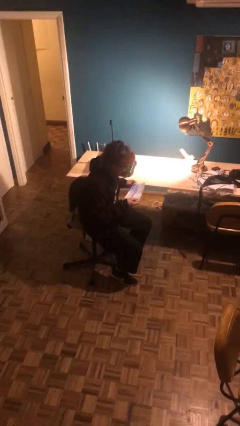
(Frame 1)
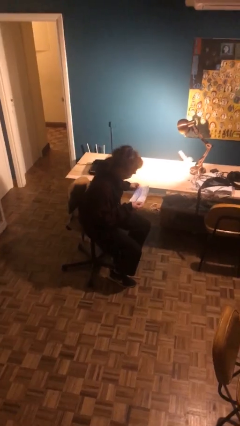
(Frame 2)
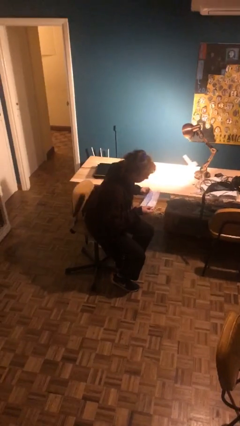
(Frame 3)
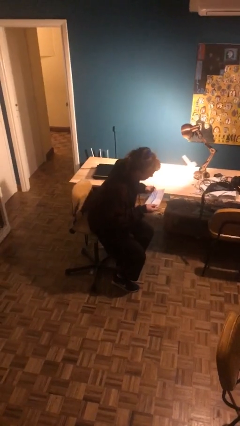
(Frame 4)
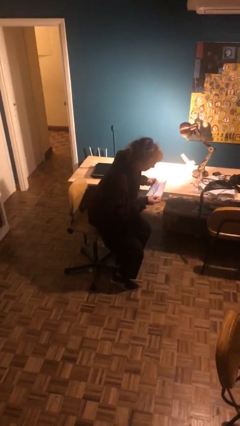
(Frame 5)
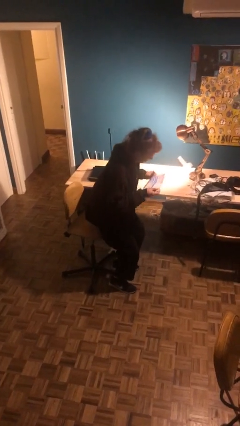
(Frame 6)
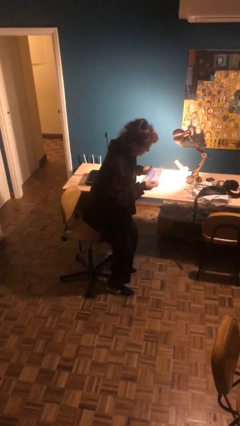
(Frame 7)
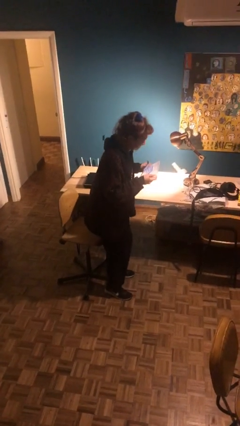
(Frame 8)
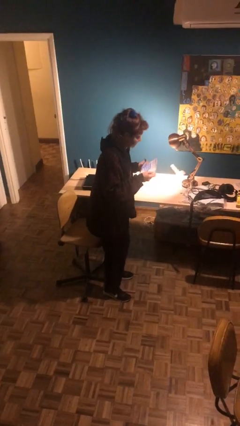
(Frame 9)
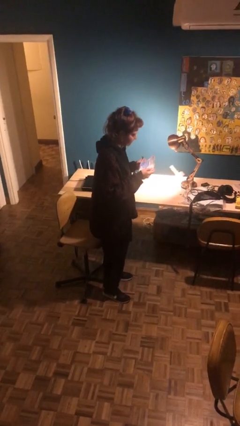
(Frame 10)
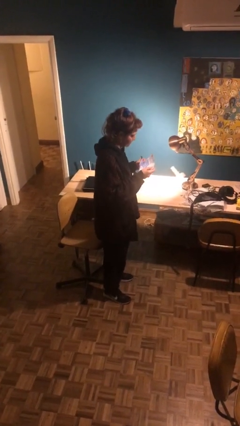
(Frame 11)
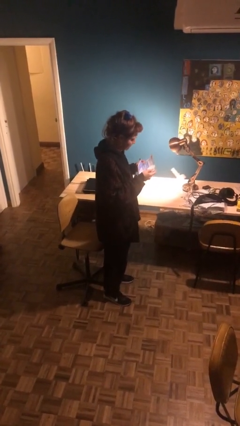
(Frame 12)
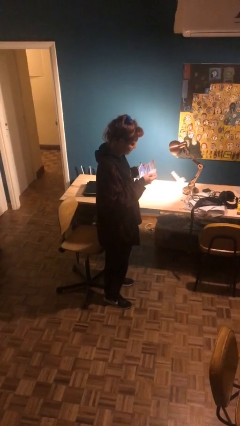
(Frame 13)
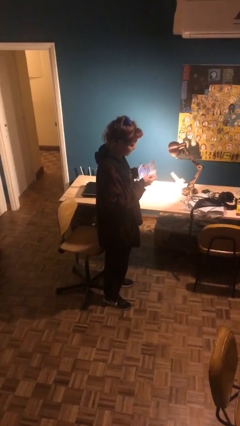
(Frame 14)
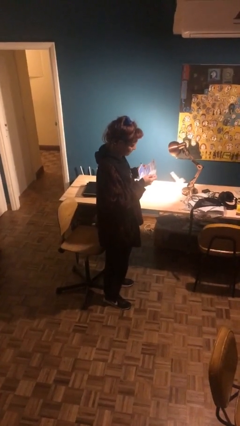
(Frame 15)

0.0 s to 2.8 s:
person stands up

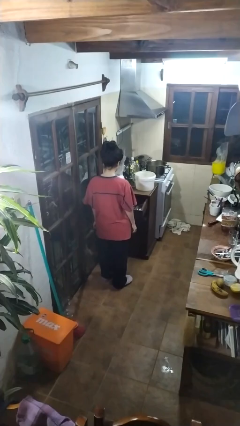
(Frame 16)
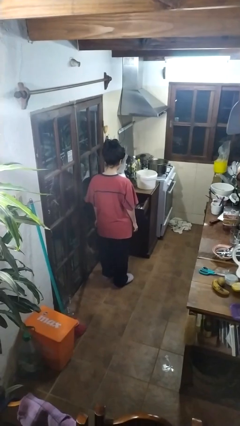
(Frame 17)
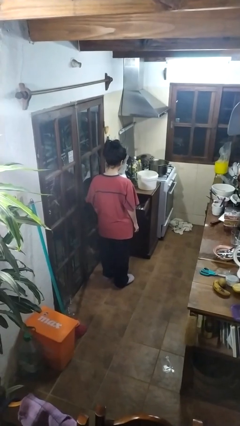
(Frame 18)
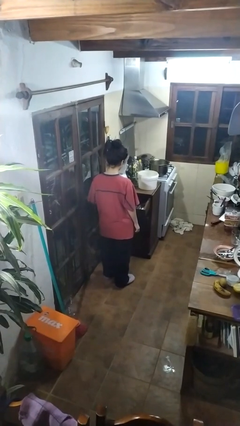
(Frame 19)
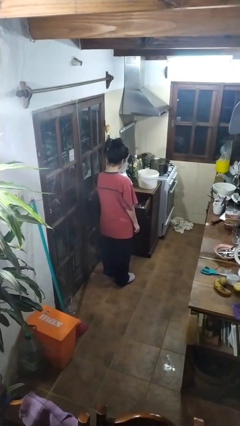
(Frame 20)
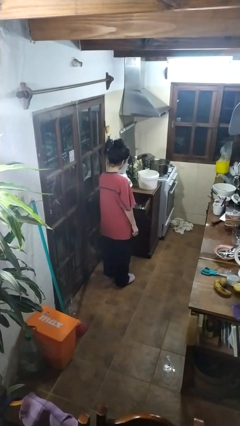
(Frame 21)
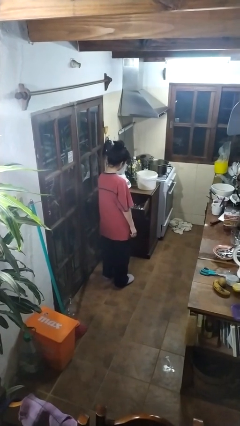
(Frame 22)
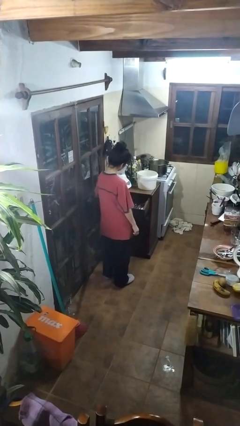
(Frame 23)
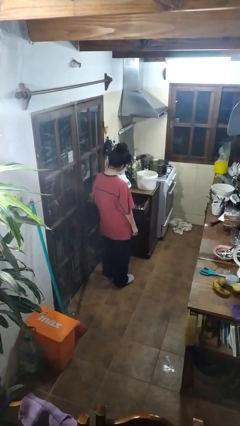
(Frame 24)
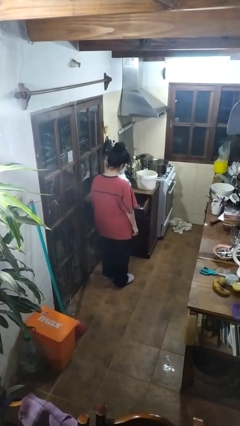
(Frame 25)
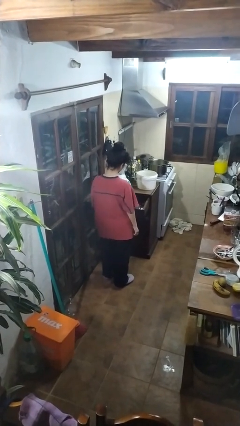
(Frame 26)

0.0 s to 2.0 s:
person takes object from kitchen drawer

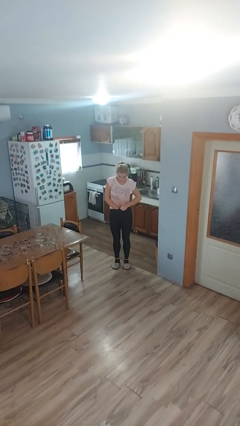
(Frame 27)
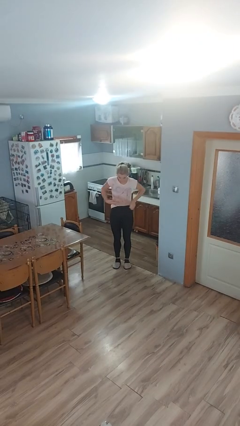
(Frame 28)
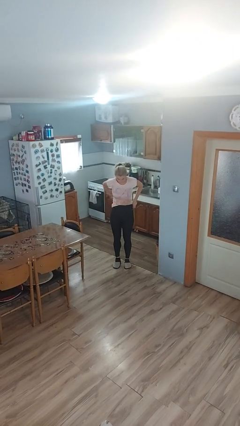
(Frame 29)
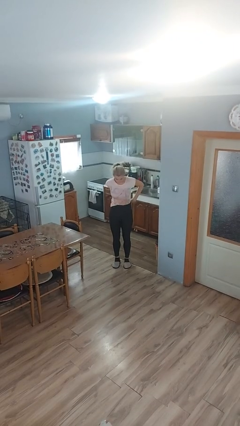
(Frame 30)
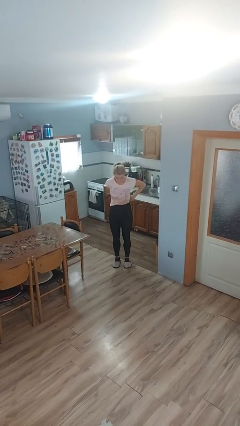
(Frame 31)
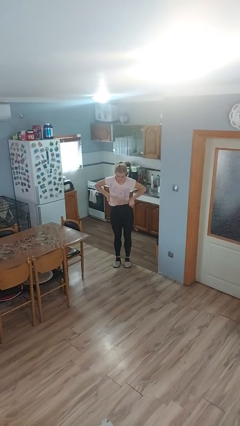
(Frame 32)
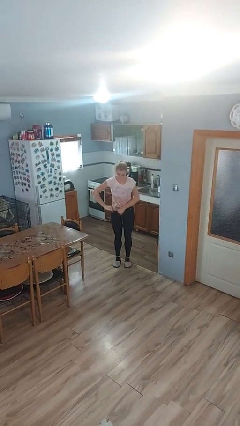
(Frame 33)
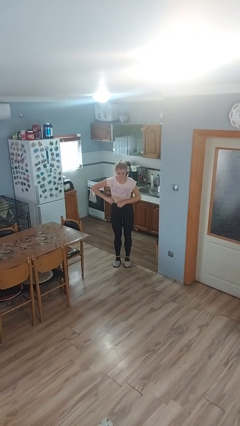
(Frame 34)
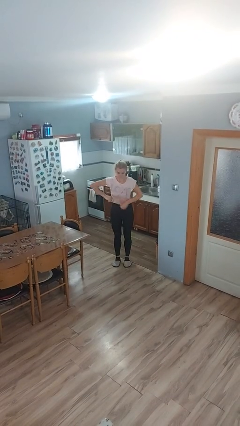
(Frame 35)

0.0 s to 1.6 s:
person tucks in shirt

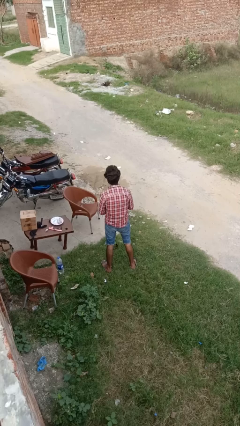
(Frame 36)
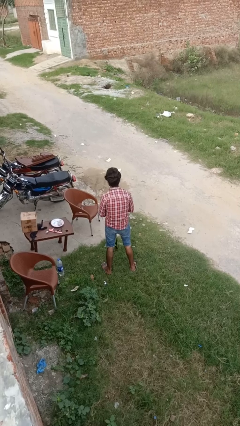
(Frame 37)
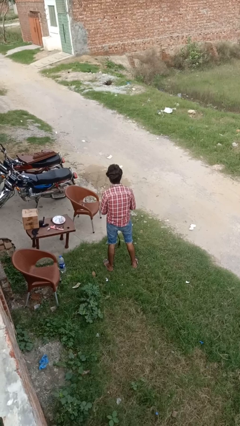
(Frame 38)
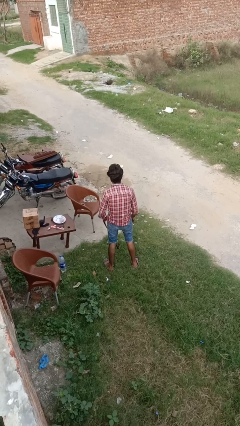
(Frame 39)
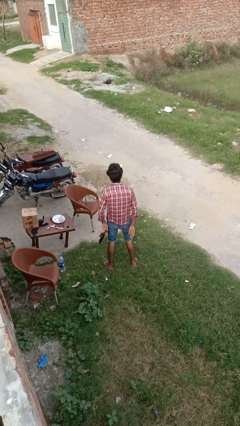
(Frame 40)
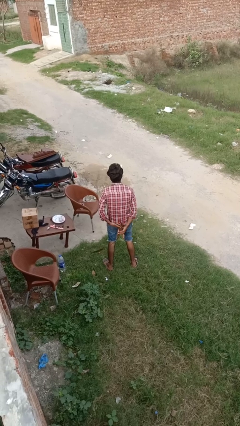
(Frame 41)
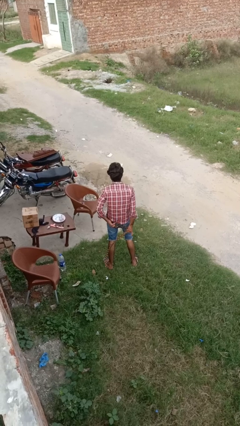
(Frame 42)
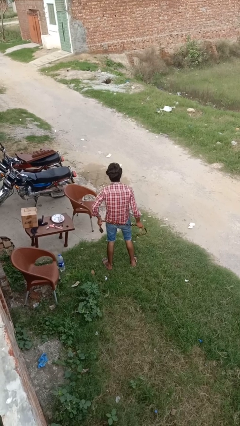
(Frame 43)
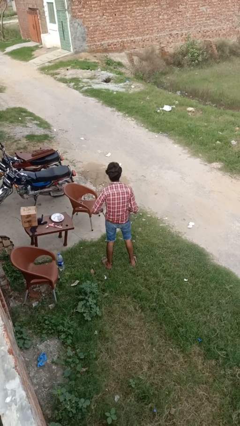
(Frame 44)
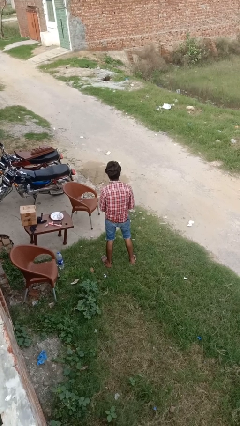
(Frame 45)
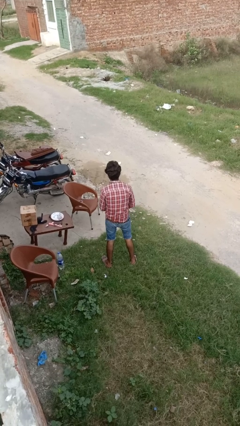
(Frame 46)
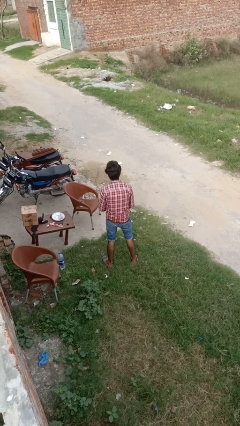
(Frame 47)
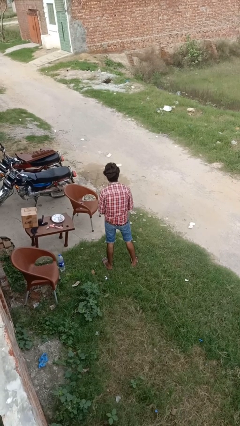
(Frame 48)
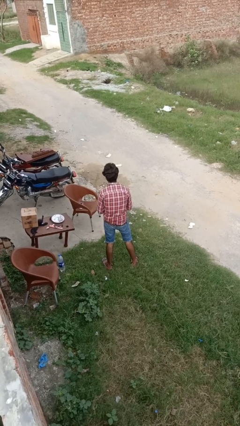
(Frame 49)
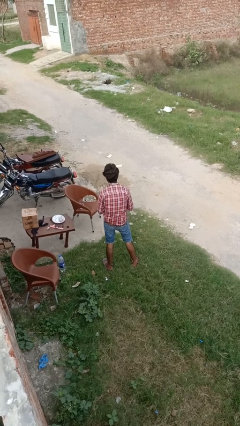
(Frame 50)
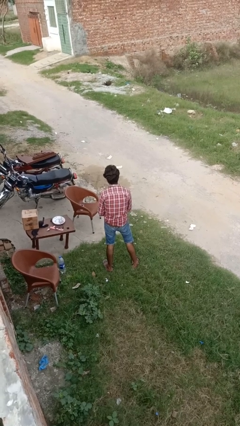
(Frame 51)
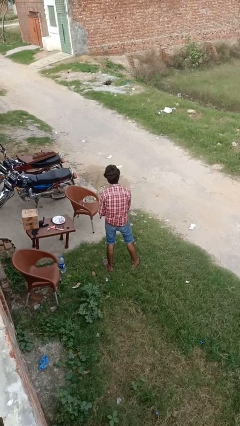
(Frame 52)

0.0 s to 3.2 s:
person puts on belt

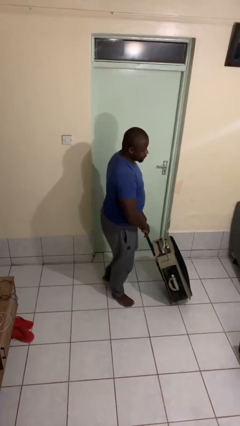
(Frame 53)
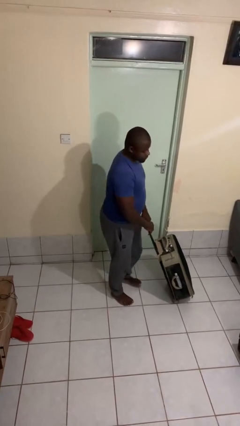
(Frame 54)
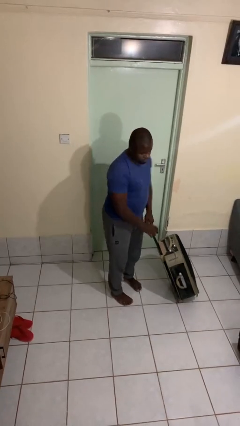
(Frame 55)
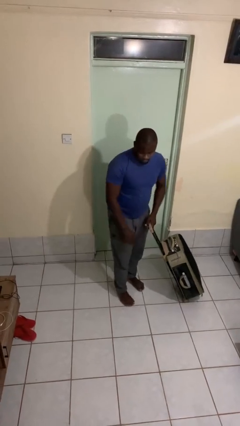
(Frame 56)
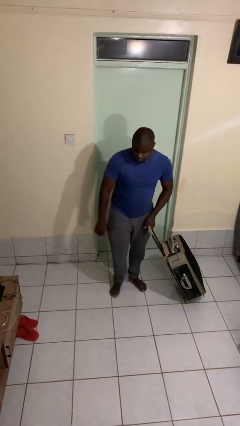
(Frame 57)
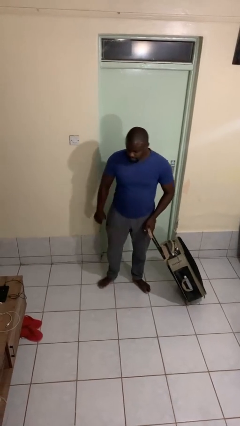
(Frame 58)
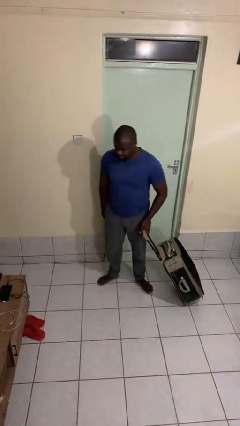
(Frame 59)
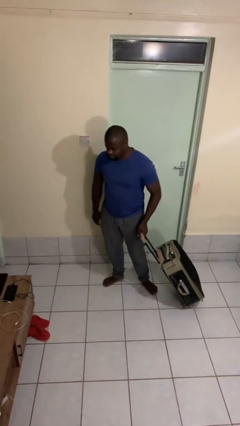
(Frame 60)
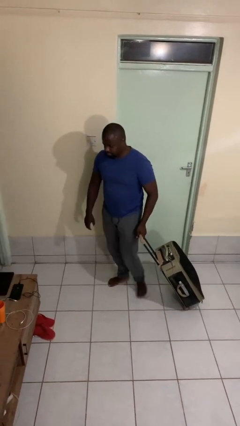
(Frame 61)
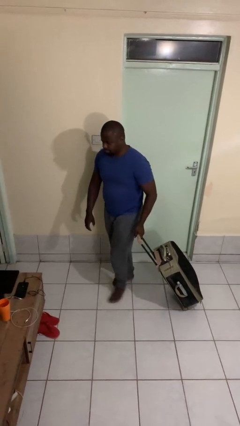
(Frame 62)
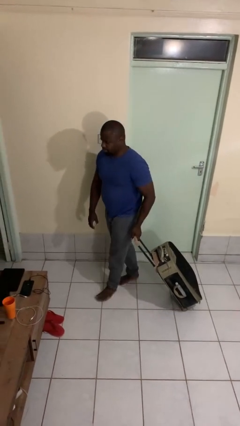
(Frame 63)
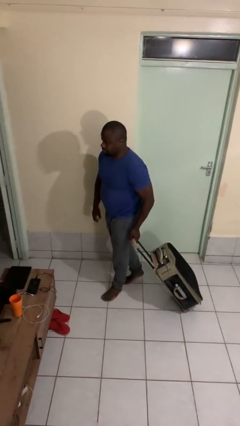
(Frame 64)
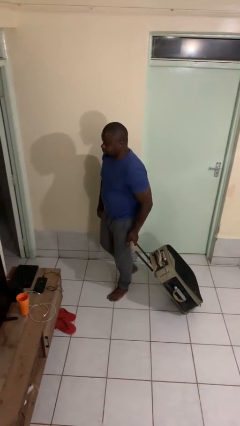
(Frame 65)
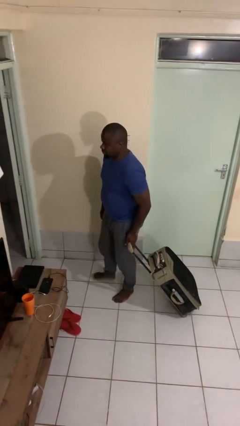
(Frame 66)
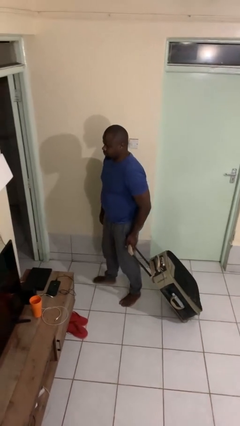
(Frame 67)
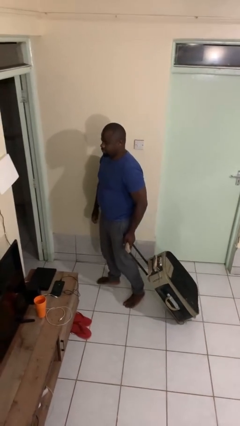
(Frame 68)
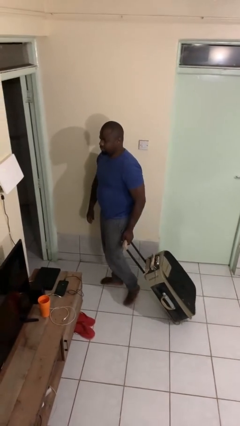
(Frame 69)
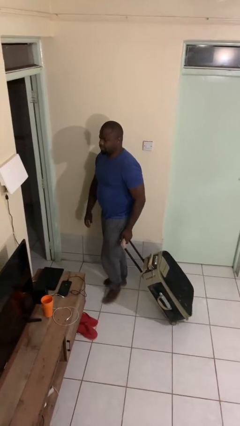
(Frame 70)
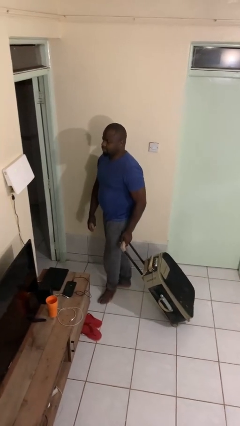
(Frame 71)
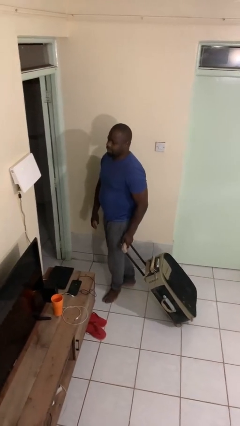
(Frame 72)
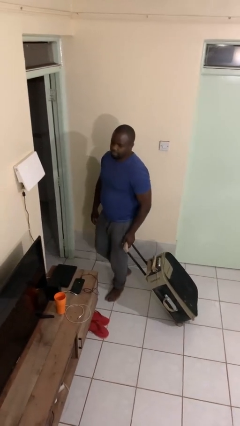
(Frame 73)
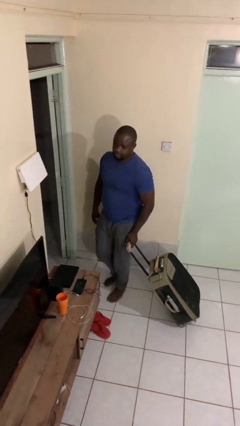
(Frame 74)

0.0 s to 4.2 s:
person pulls wheeled cart

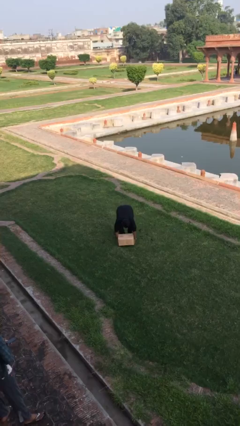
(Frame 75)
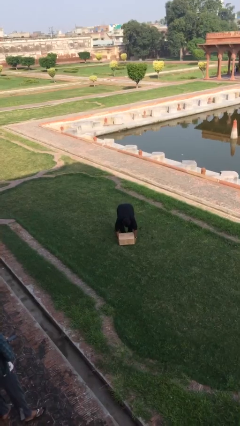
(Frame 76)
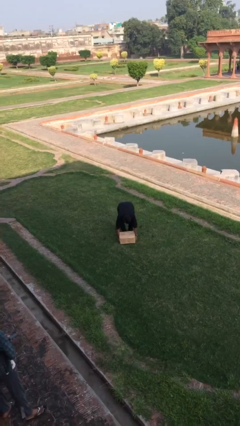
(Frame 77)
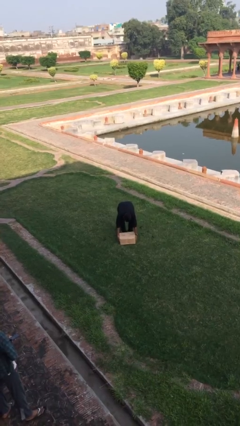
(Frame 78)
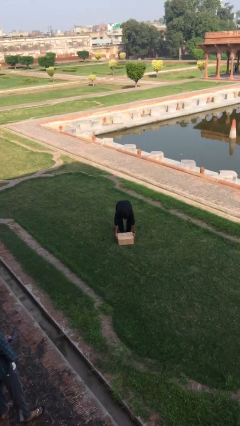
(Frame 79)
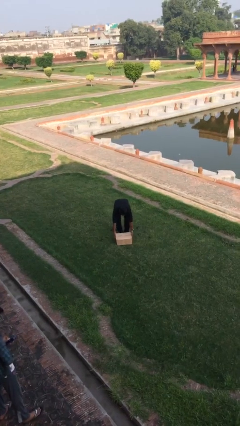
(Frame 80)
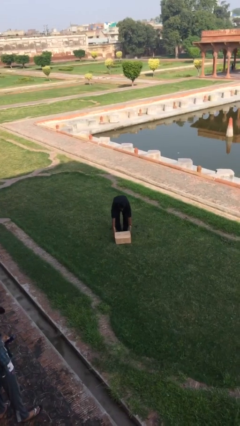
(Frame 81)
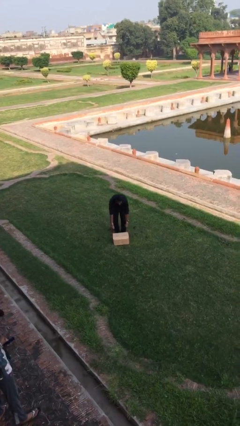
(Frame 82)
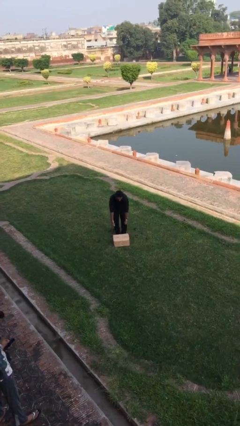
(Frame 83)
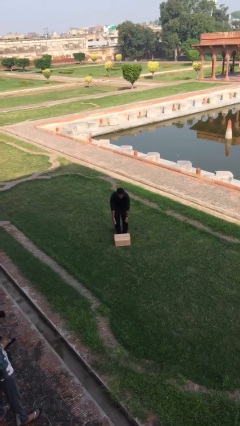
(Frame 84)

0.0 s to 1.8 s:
person puts down object on floor

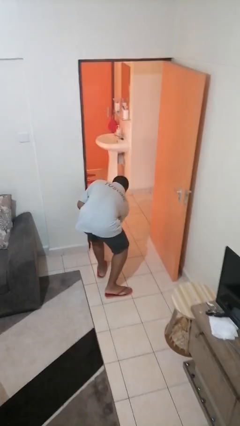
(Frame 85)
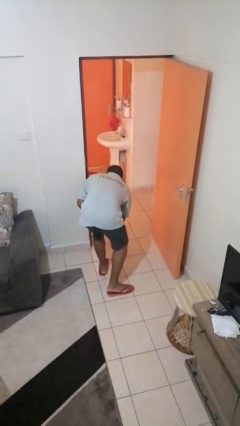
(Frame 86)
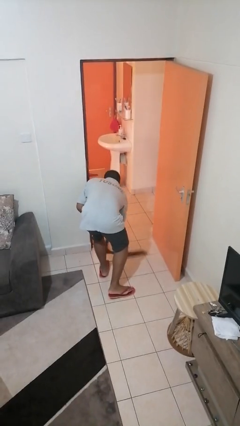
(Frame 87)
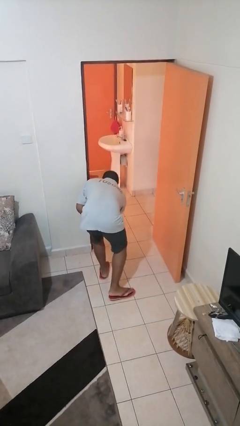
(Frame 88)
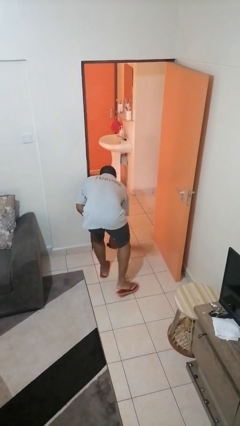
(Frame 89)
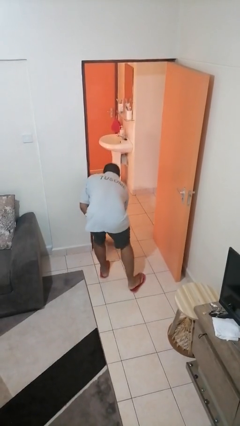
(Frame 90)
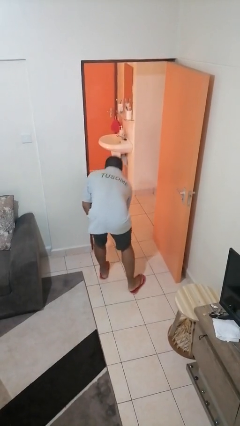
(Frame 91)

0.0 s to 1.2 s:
person sweeps floor
